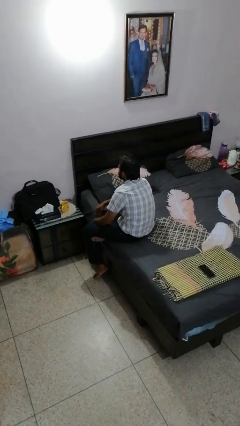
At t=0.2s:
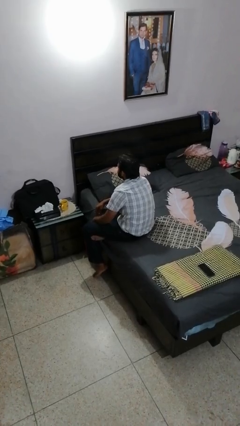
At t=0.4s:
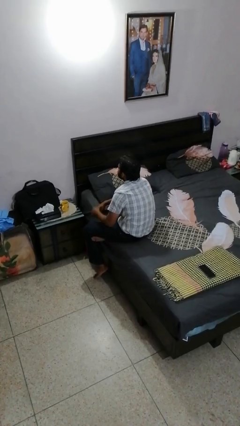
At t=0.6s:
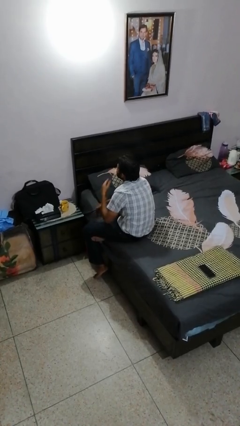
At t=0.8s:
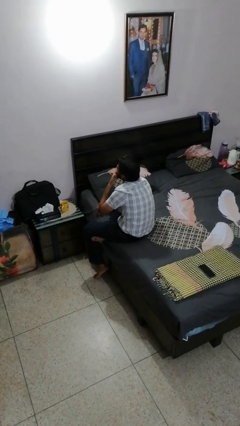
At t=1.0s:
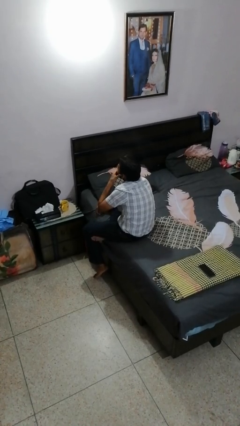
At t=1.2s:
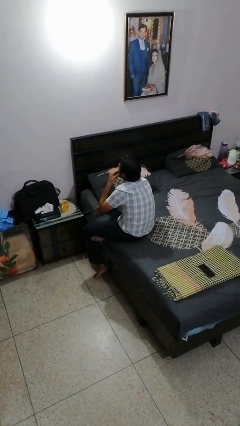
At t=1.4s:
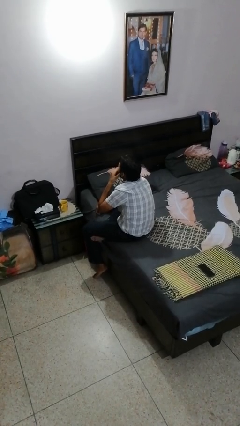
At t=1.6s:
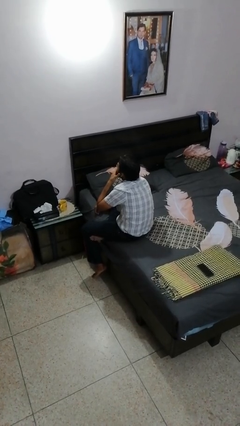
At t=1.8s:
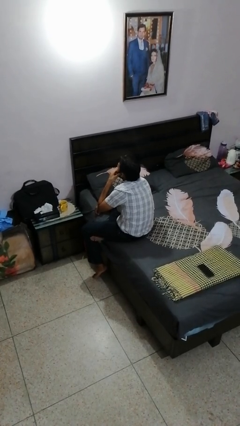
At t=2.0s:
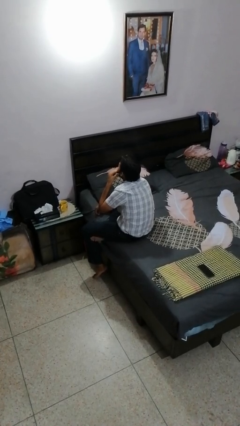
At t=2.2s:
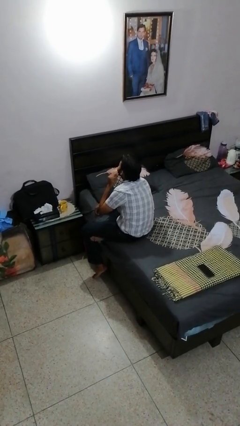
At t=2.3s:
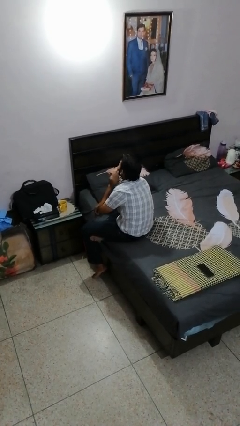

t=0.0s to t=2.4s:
person strokes chin

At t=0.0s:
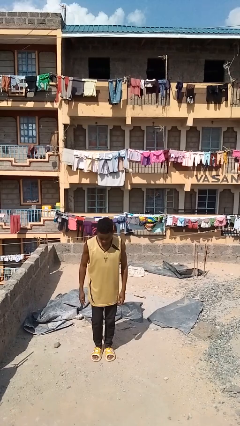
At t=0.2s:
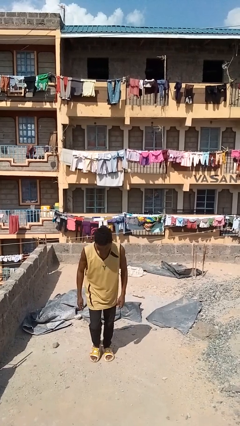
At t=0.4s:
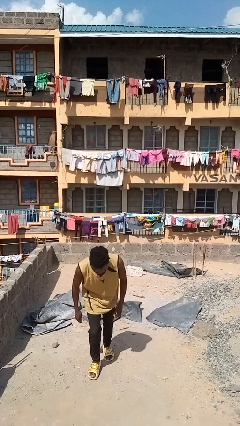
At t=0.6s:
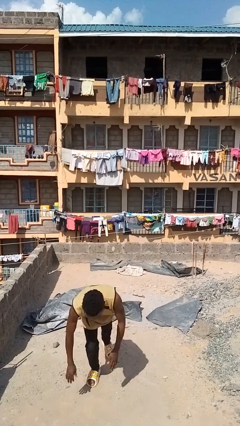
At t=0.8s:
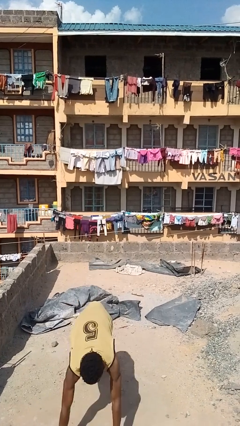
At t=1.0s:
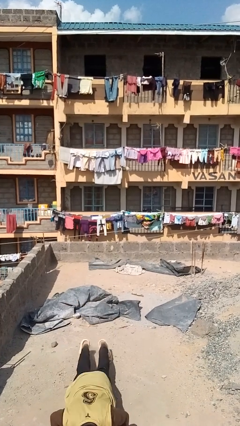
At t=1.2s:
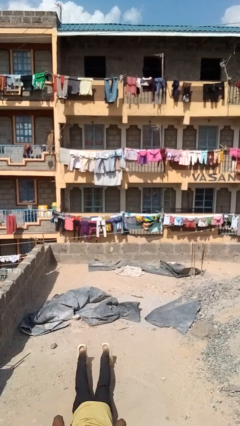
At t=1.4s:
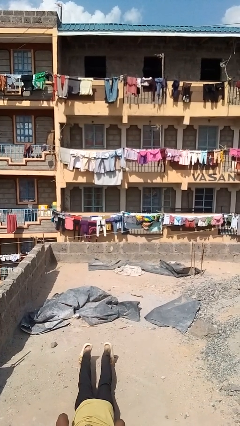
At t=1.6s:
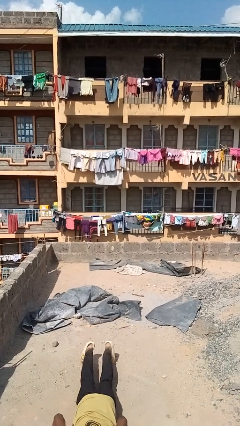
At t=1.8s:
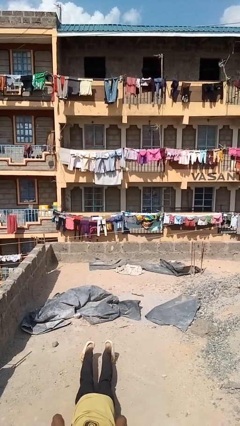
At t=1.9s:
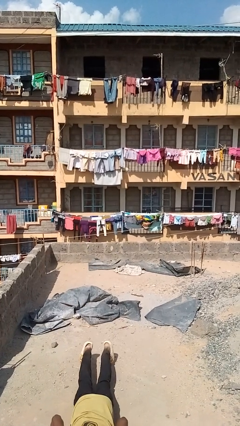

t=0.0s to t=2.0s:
person falls while standing

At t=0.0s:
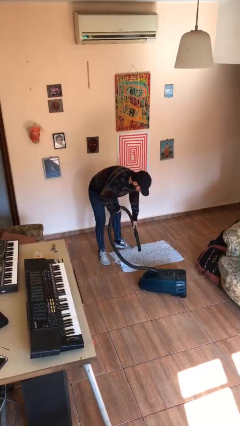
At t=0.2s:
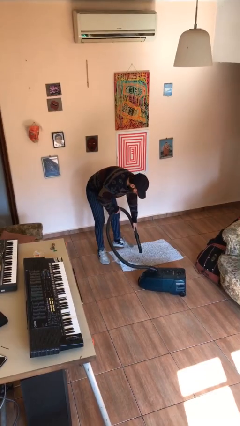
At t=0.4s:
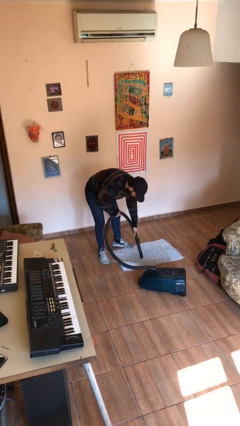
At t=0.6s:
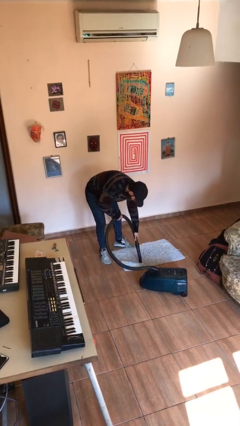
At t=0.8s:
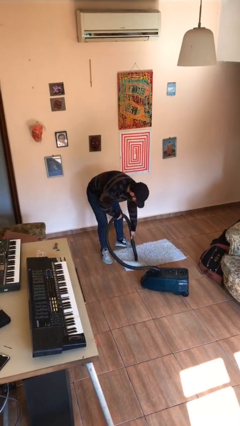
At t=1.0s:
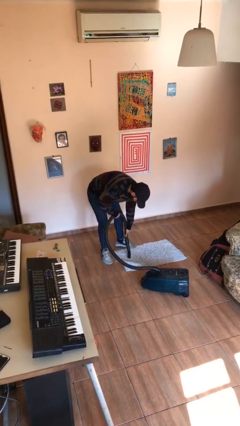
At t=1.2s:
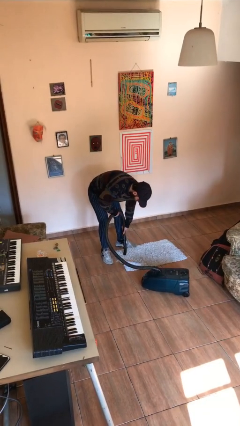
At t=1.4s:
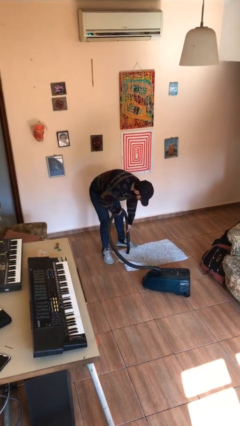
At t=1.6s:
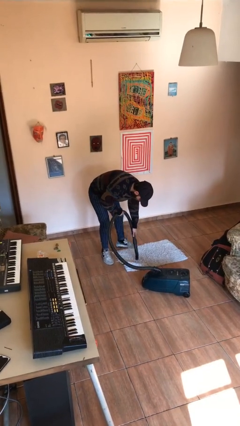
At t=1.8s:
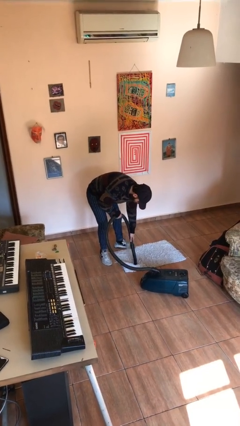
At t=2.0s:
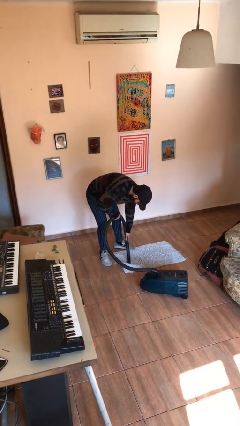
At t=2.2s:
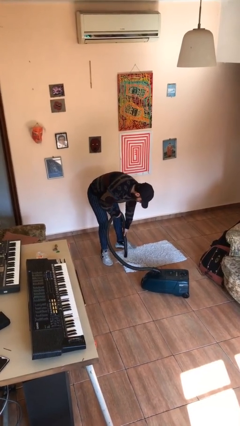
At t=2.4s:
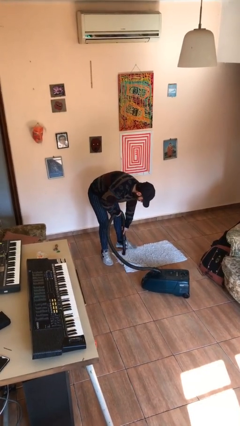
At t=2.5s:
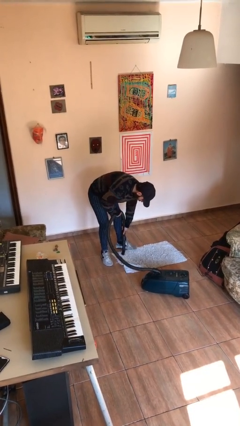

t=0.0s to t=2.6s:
person vacuums carpet

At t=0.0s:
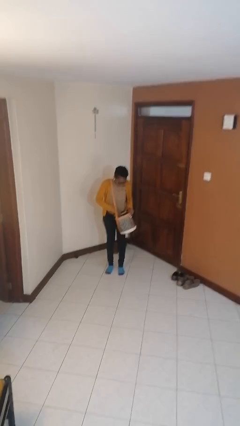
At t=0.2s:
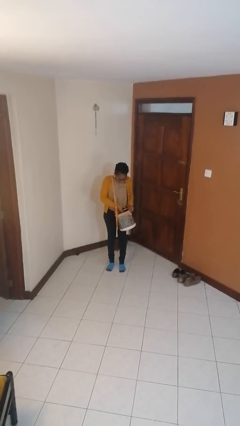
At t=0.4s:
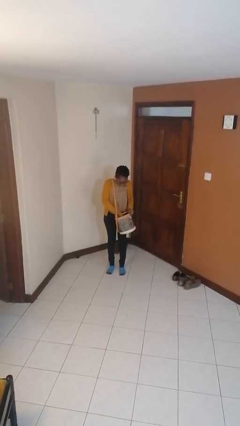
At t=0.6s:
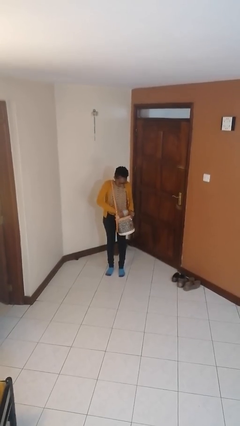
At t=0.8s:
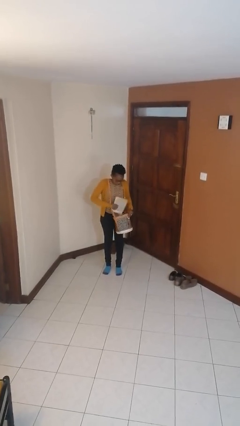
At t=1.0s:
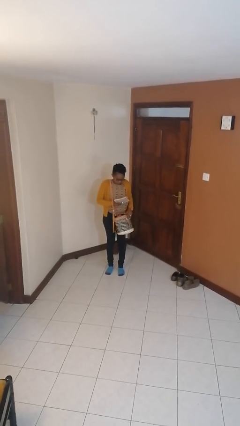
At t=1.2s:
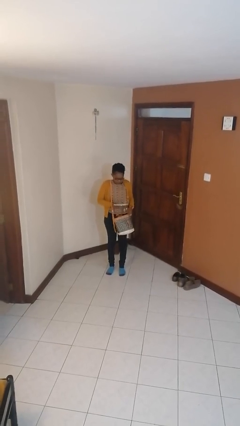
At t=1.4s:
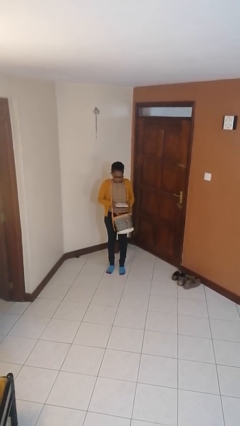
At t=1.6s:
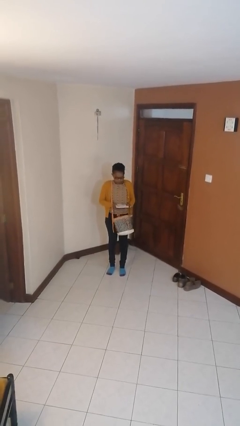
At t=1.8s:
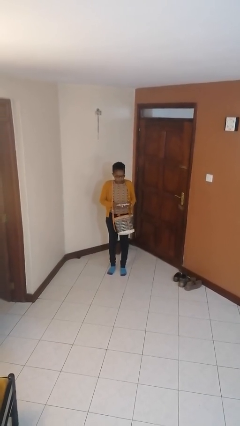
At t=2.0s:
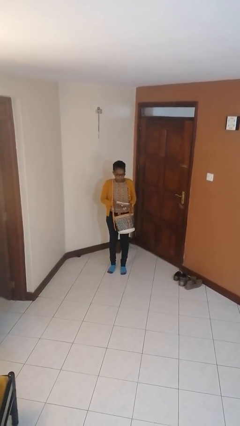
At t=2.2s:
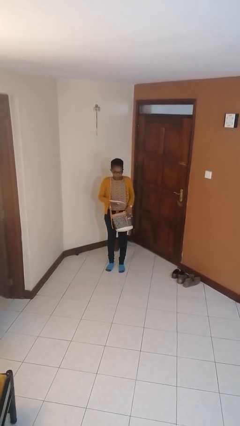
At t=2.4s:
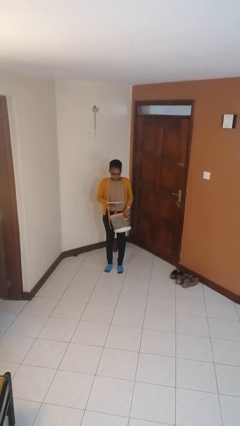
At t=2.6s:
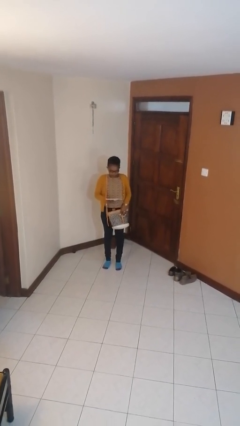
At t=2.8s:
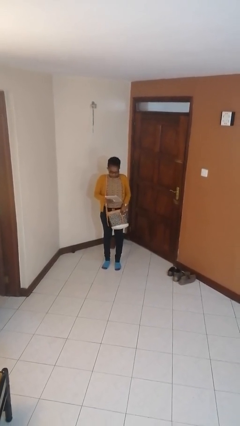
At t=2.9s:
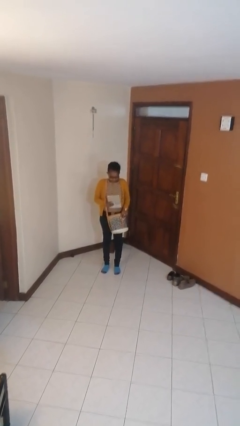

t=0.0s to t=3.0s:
person takes object from purse

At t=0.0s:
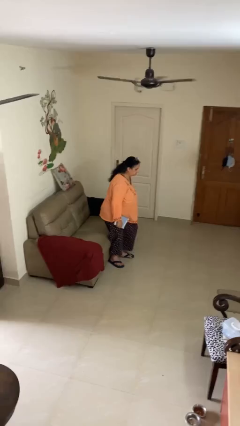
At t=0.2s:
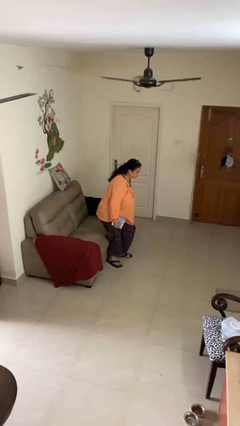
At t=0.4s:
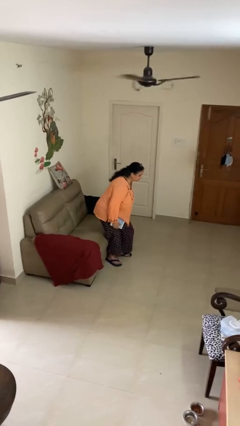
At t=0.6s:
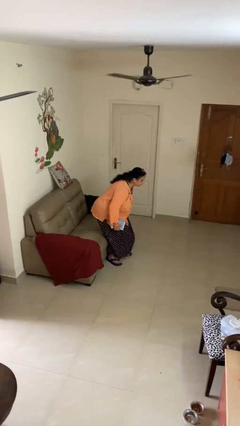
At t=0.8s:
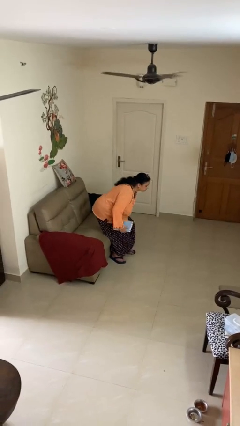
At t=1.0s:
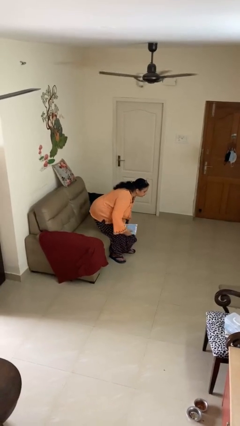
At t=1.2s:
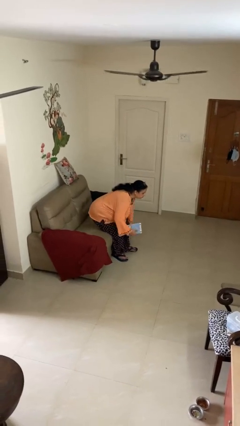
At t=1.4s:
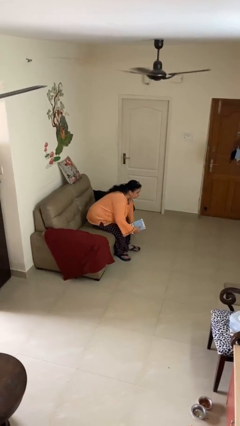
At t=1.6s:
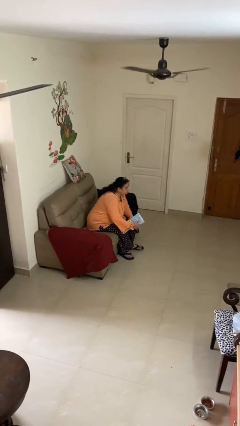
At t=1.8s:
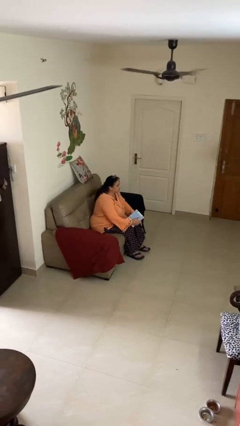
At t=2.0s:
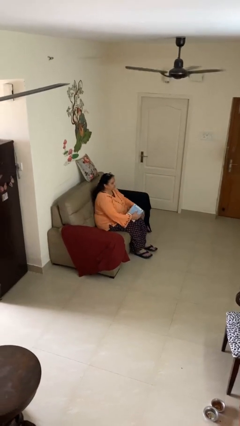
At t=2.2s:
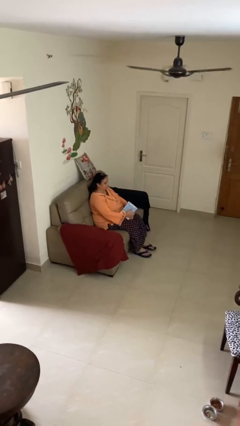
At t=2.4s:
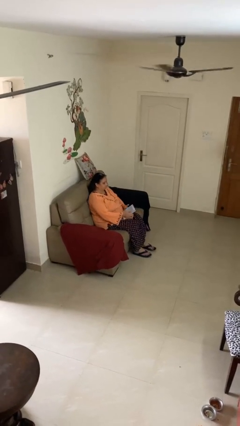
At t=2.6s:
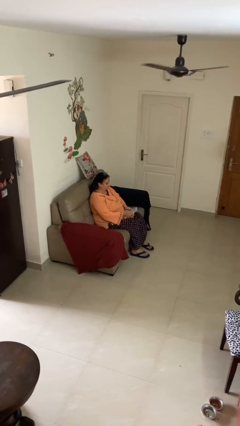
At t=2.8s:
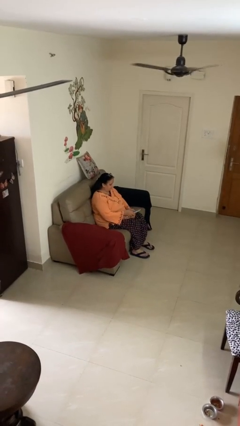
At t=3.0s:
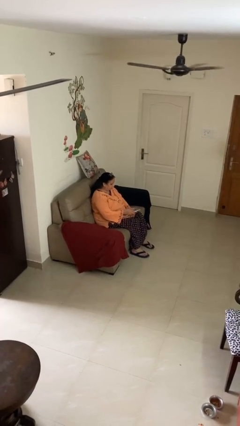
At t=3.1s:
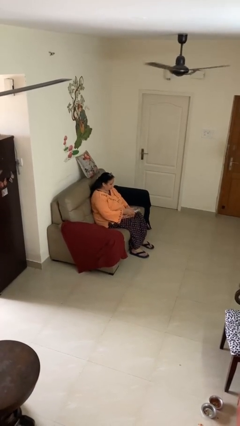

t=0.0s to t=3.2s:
person sits down

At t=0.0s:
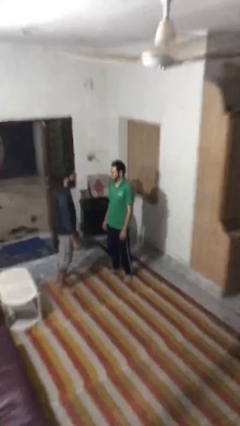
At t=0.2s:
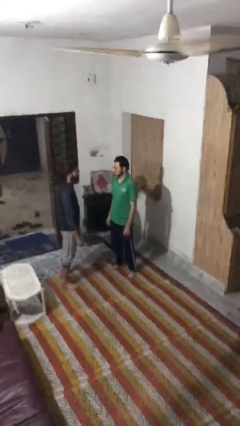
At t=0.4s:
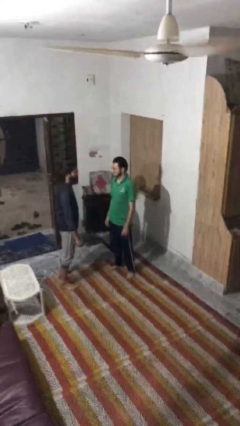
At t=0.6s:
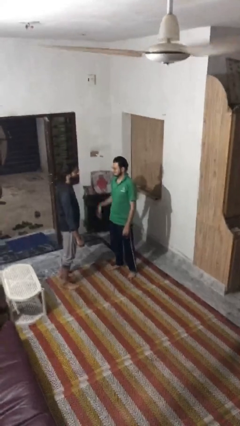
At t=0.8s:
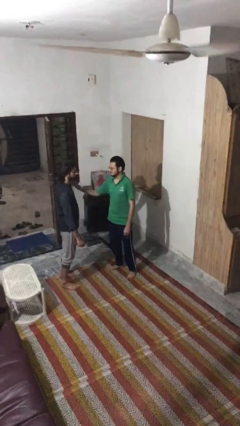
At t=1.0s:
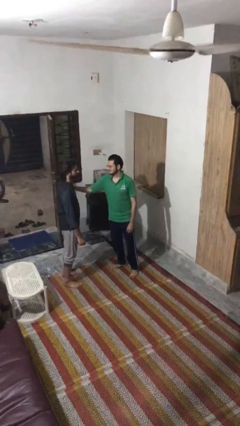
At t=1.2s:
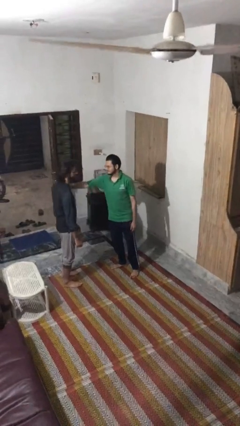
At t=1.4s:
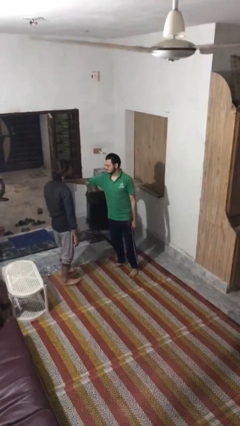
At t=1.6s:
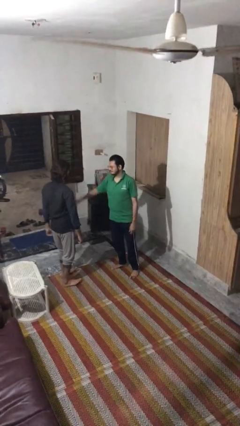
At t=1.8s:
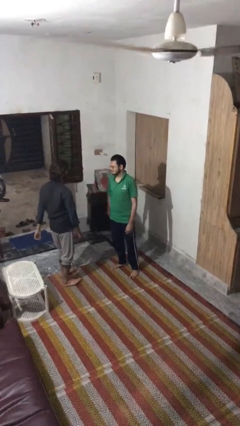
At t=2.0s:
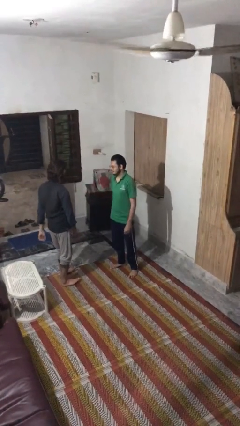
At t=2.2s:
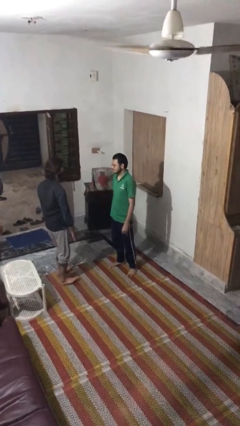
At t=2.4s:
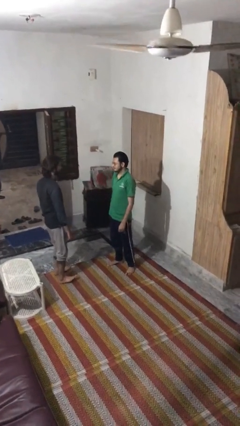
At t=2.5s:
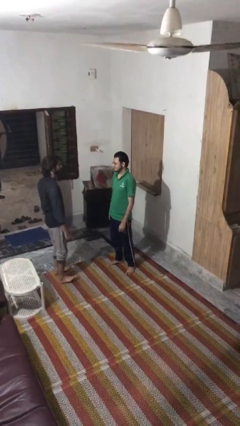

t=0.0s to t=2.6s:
person shoves person

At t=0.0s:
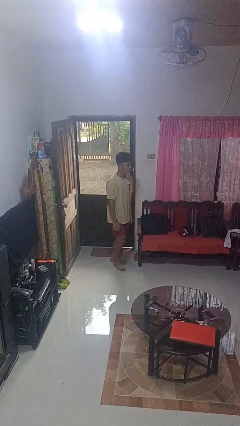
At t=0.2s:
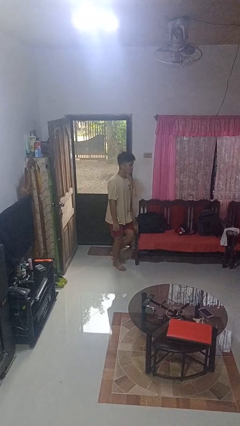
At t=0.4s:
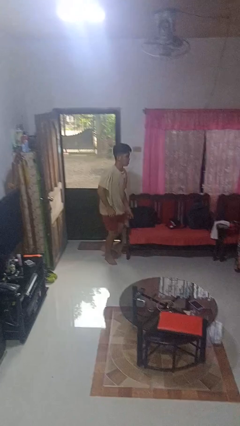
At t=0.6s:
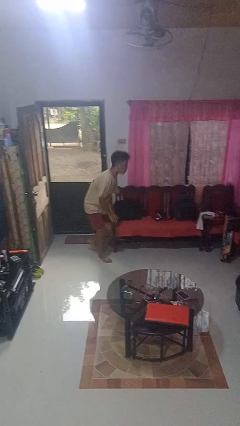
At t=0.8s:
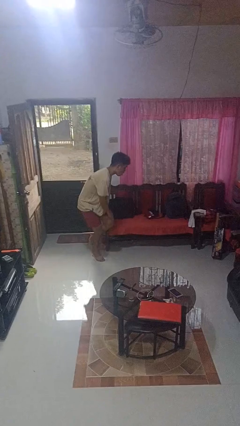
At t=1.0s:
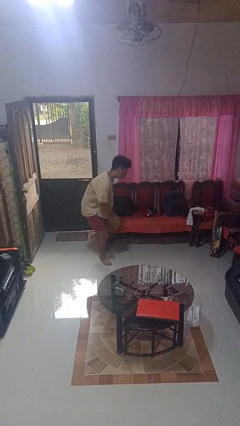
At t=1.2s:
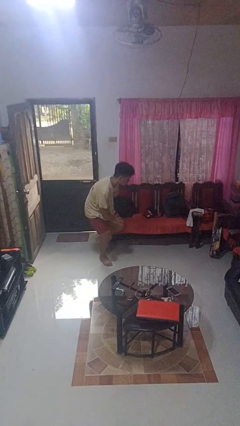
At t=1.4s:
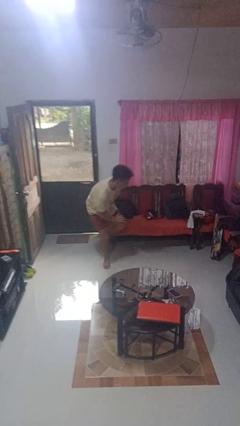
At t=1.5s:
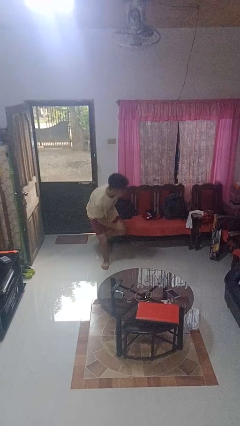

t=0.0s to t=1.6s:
person trips on object on floor
